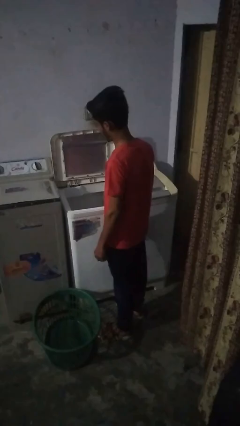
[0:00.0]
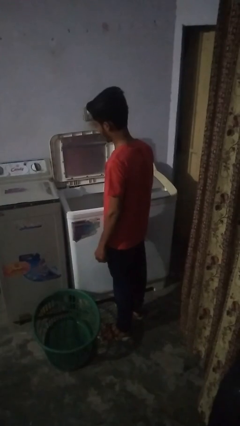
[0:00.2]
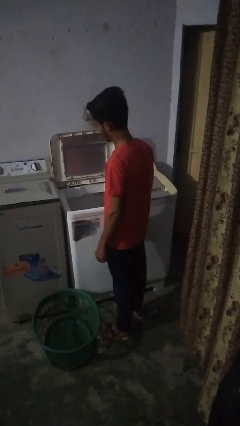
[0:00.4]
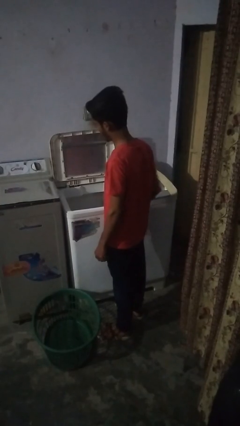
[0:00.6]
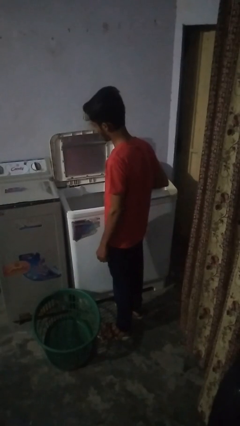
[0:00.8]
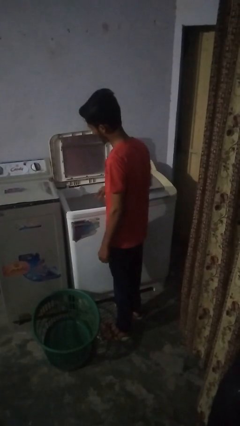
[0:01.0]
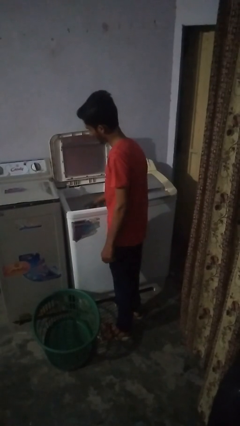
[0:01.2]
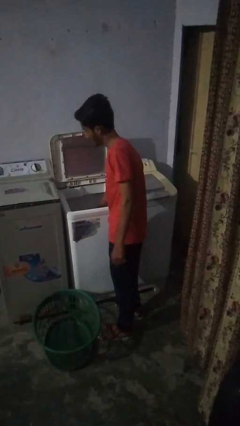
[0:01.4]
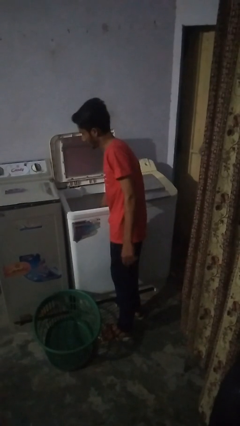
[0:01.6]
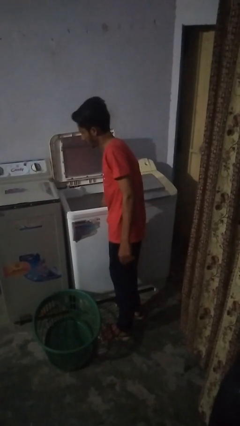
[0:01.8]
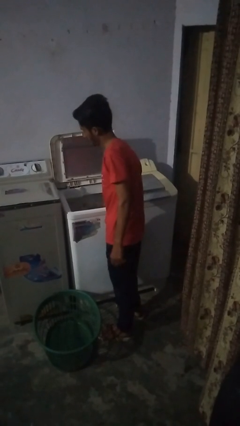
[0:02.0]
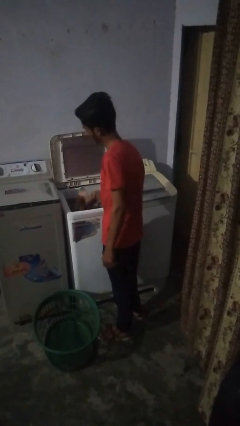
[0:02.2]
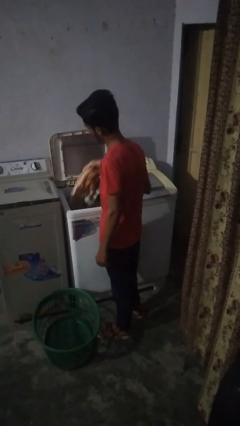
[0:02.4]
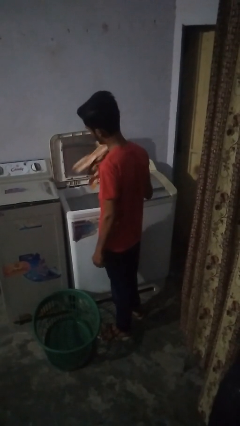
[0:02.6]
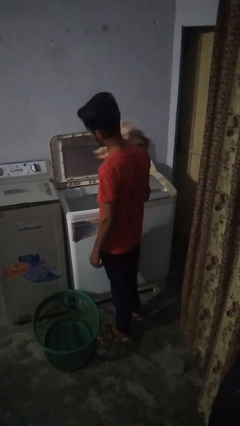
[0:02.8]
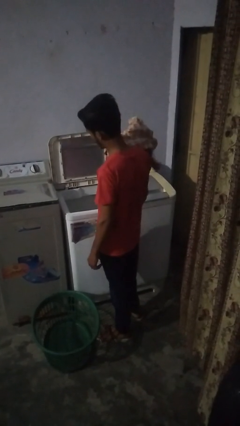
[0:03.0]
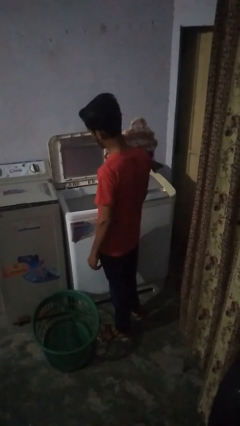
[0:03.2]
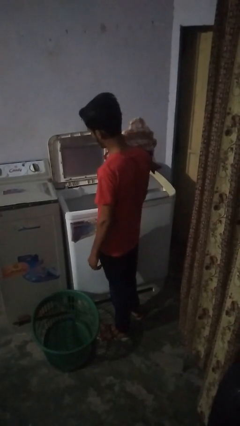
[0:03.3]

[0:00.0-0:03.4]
person unloads clotheswasher

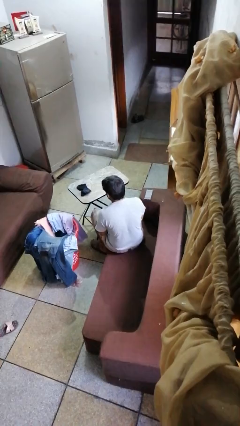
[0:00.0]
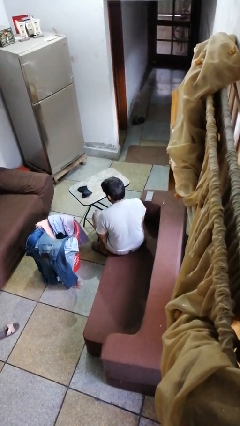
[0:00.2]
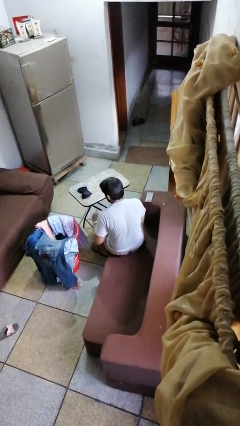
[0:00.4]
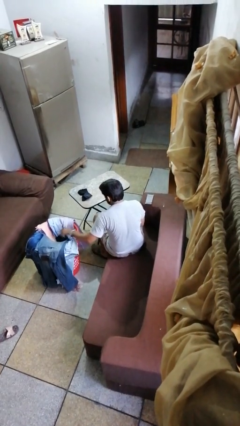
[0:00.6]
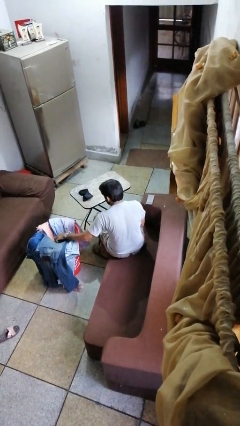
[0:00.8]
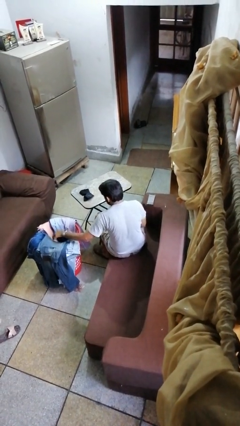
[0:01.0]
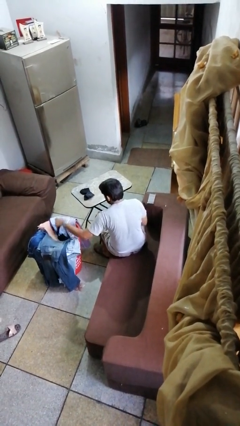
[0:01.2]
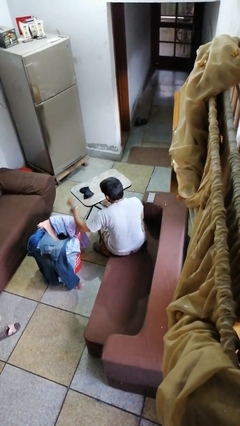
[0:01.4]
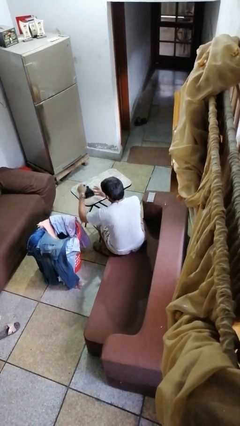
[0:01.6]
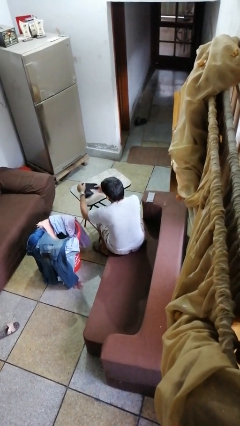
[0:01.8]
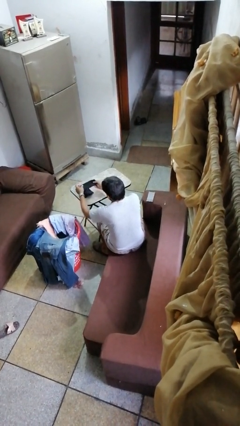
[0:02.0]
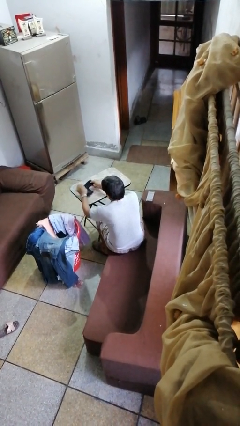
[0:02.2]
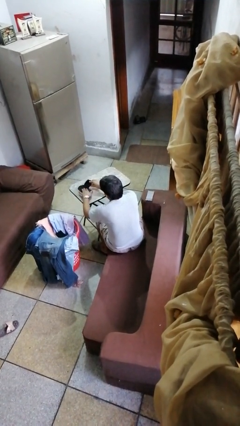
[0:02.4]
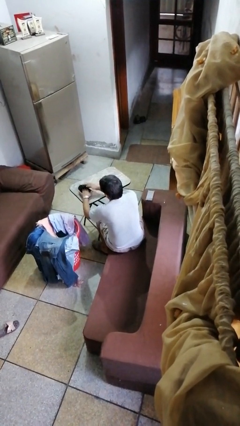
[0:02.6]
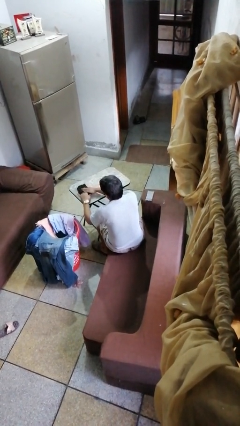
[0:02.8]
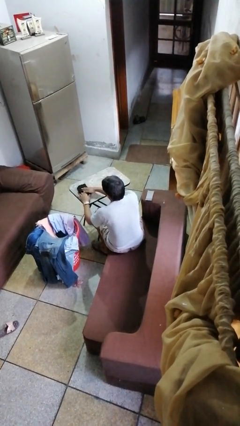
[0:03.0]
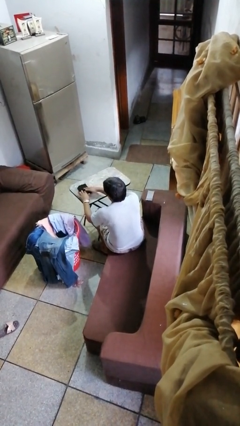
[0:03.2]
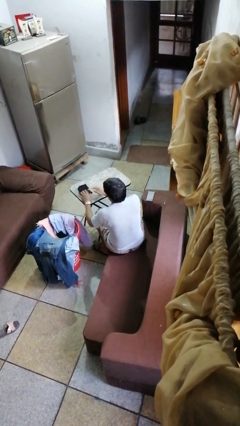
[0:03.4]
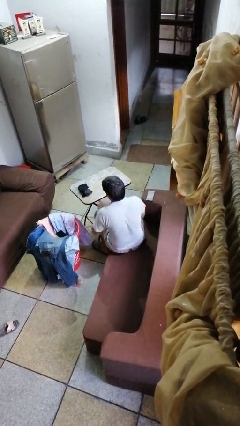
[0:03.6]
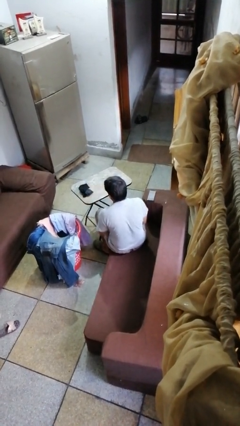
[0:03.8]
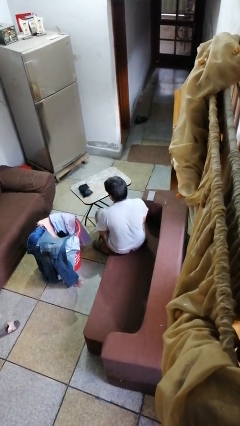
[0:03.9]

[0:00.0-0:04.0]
person folds socks

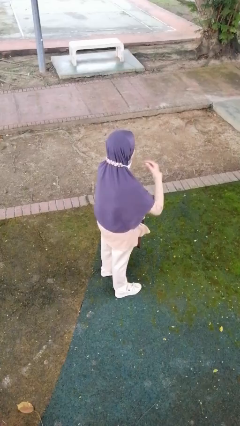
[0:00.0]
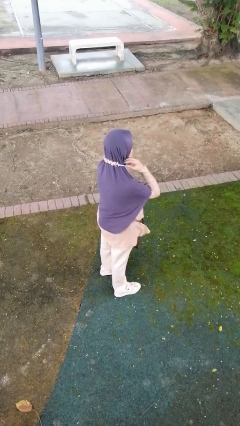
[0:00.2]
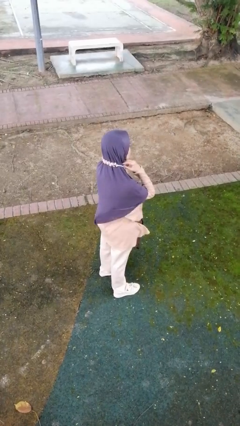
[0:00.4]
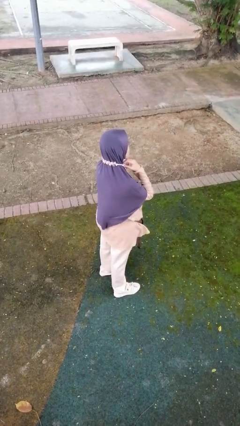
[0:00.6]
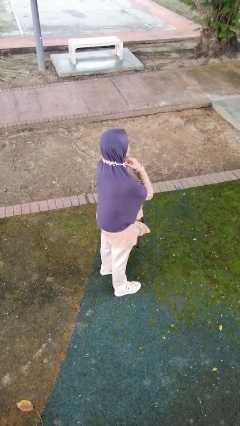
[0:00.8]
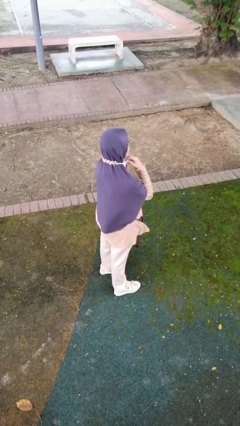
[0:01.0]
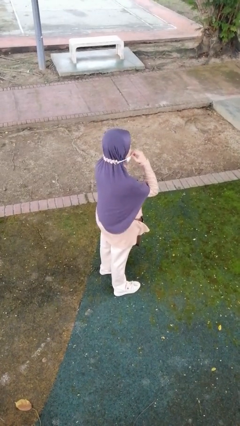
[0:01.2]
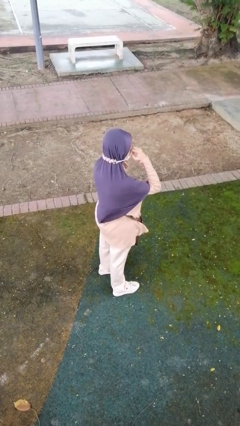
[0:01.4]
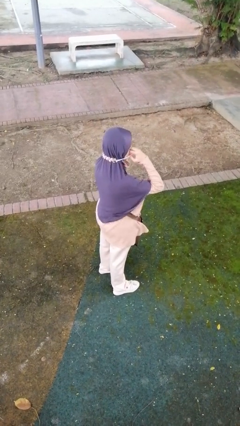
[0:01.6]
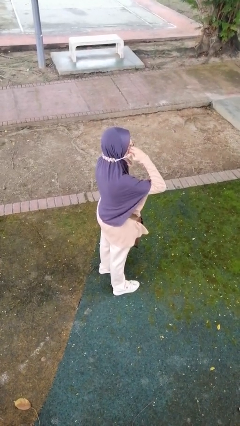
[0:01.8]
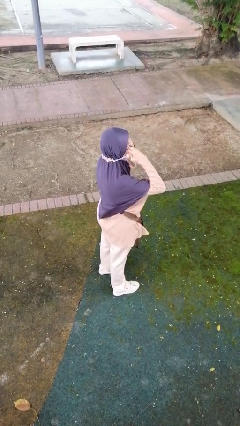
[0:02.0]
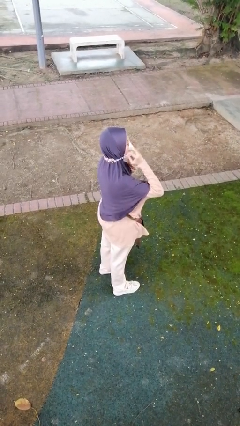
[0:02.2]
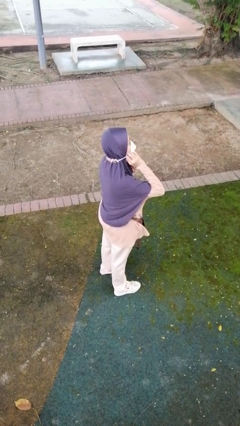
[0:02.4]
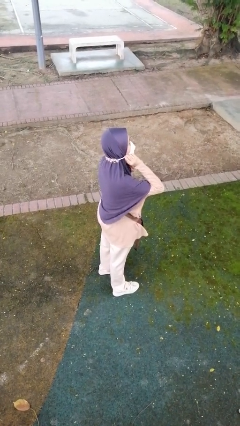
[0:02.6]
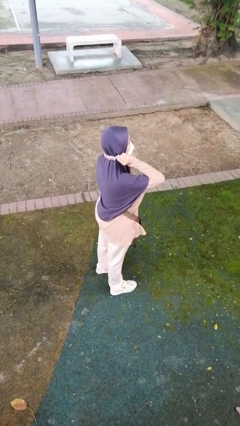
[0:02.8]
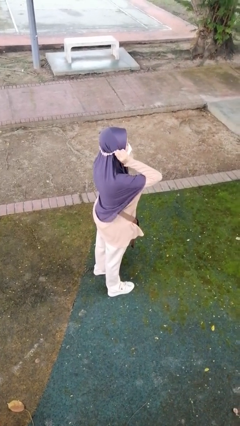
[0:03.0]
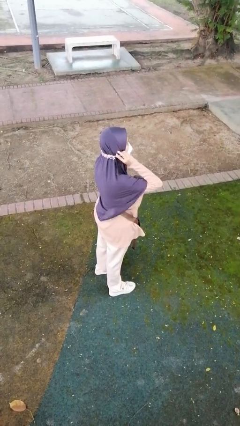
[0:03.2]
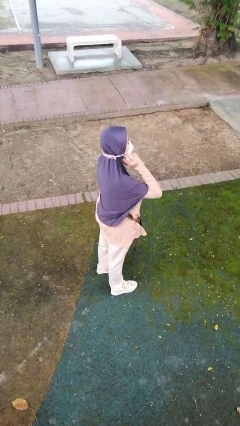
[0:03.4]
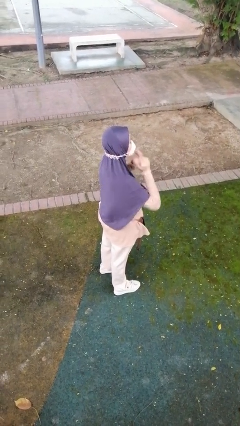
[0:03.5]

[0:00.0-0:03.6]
person puts on facemask

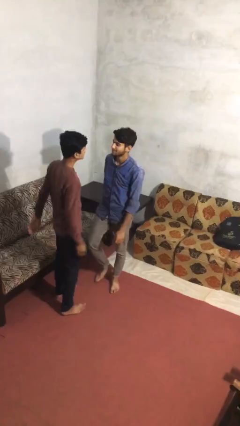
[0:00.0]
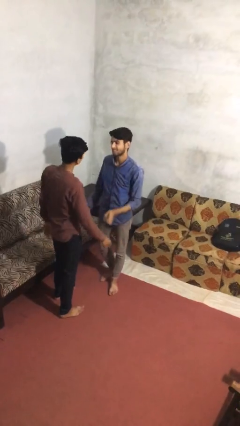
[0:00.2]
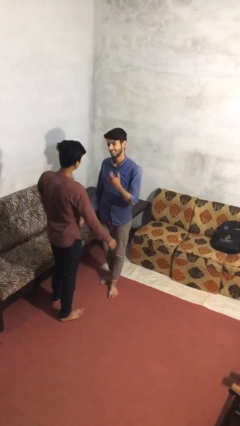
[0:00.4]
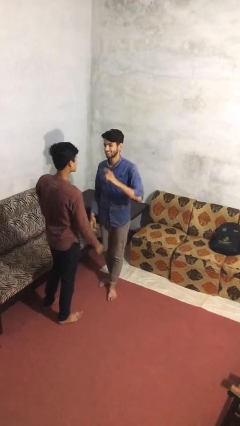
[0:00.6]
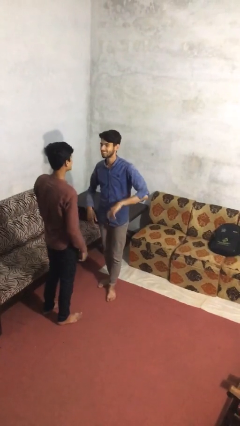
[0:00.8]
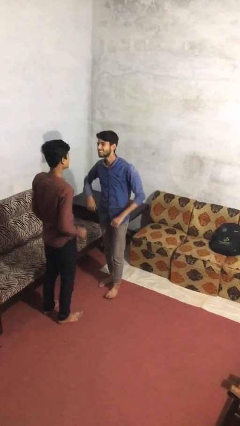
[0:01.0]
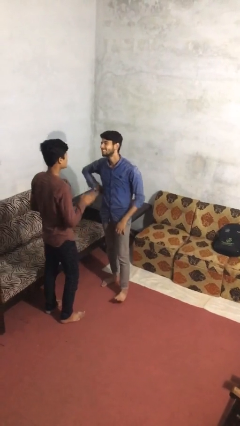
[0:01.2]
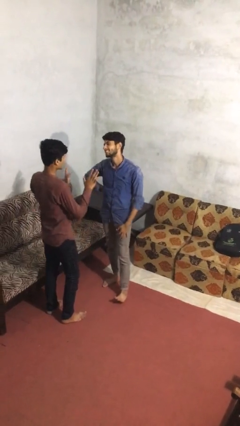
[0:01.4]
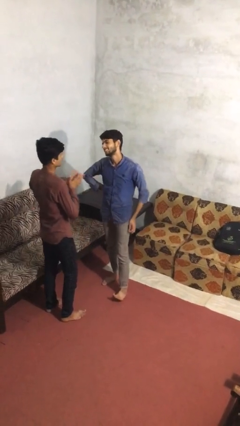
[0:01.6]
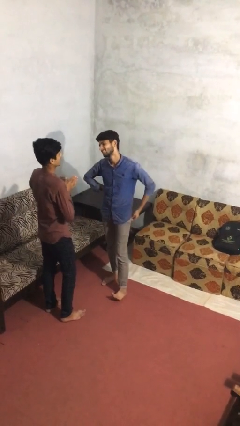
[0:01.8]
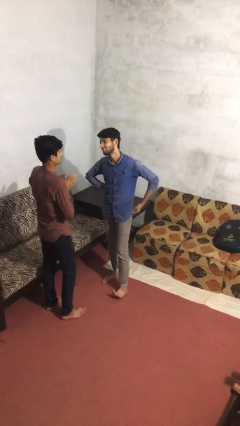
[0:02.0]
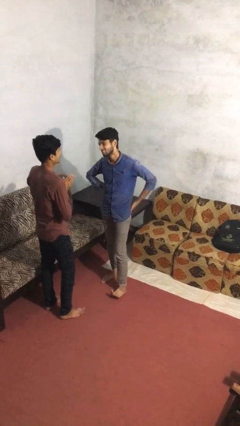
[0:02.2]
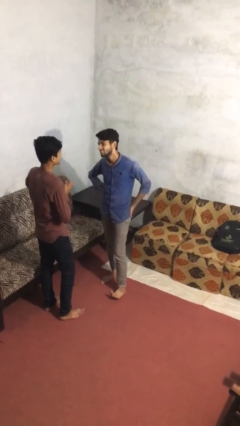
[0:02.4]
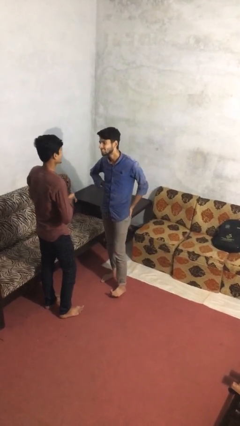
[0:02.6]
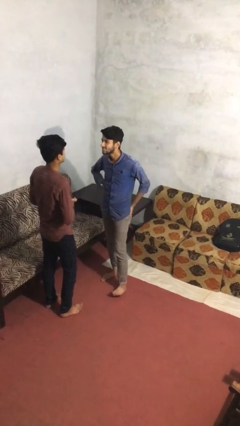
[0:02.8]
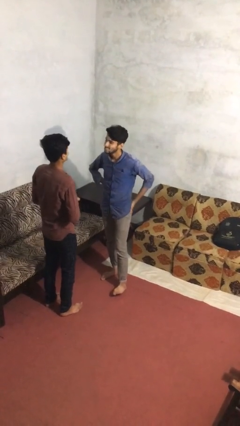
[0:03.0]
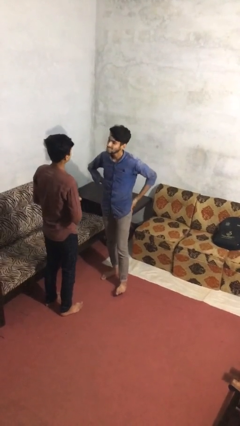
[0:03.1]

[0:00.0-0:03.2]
person talks to person

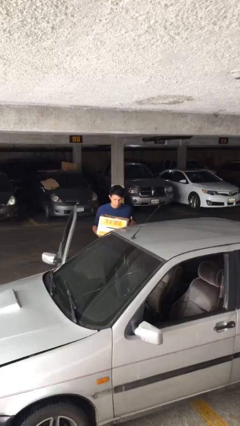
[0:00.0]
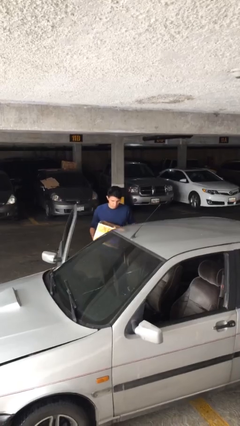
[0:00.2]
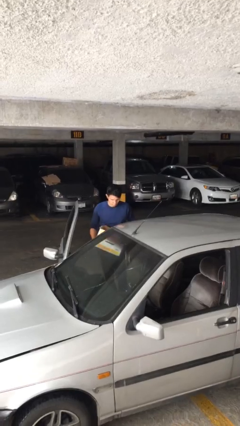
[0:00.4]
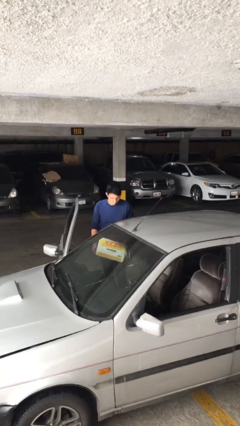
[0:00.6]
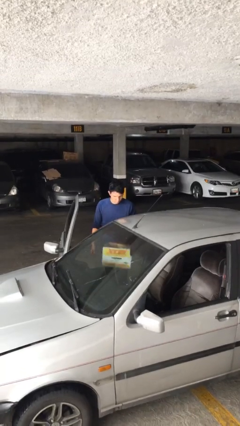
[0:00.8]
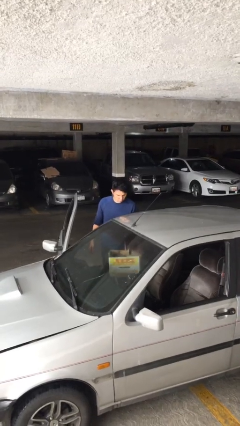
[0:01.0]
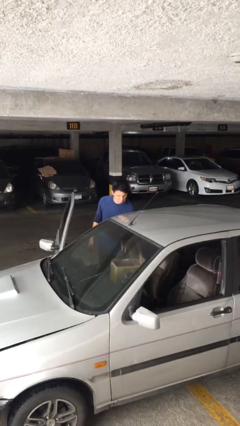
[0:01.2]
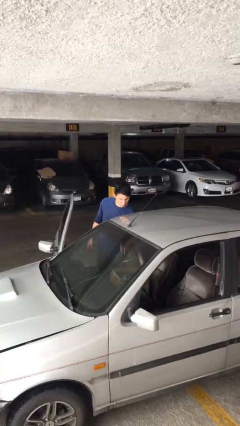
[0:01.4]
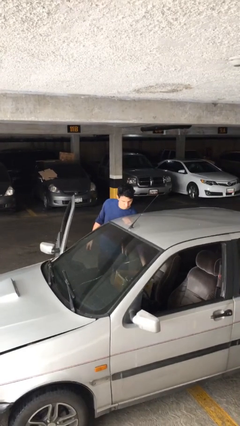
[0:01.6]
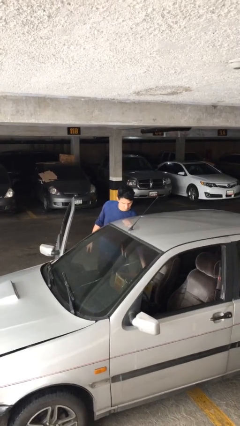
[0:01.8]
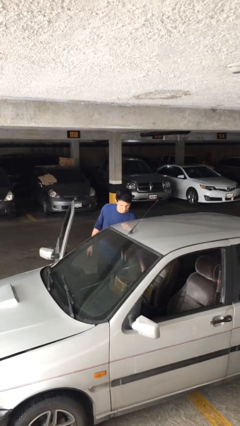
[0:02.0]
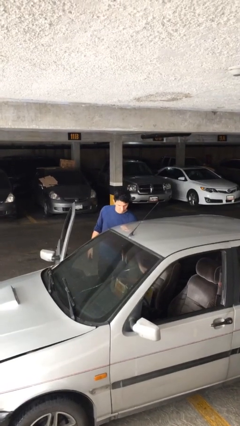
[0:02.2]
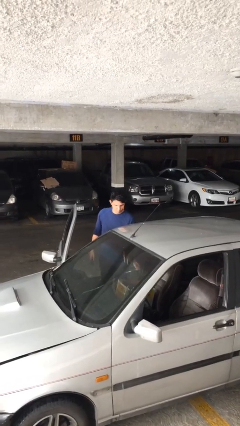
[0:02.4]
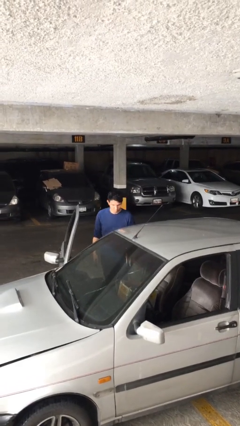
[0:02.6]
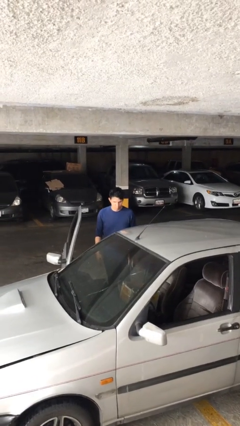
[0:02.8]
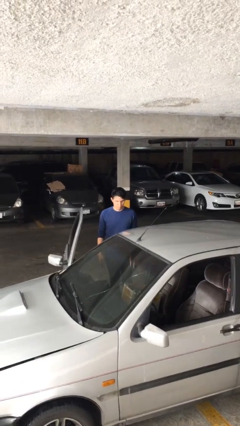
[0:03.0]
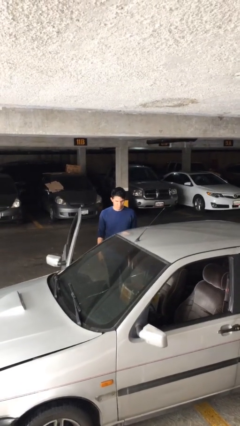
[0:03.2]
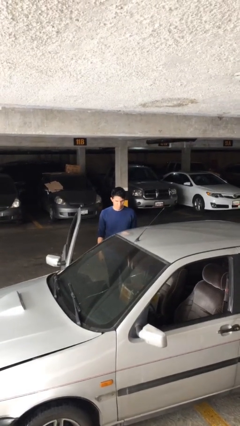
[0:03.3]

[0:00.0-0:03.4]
person loads car
